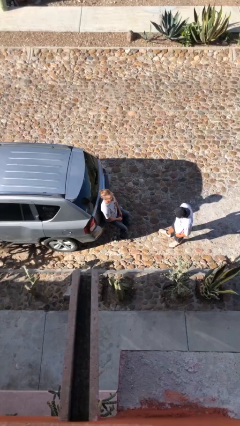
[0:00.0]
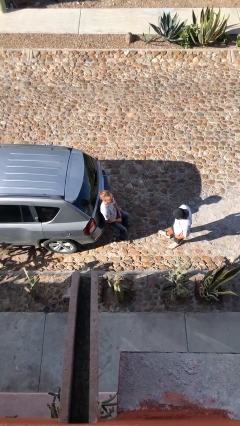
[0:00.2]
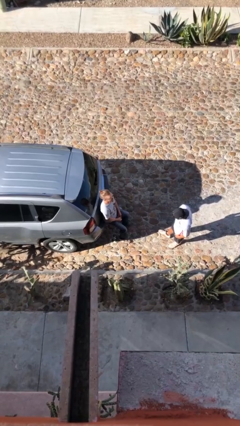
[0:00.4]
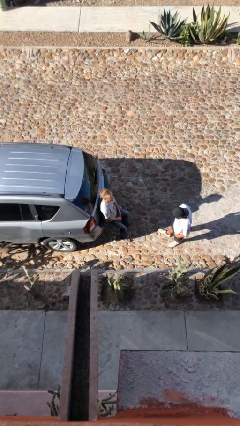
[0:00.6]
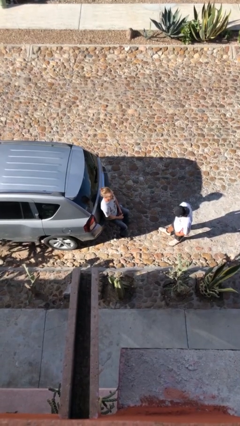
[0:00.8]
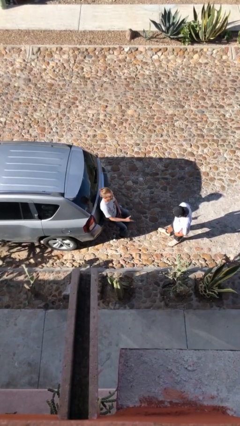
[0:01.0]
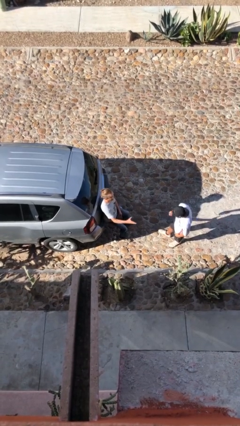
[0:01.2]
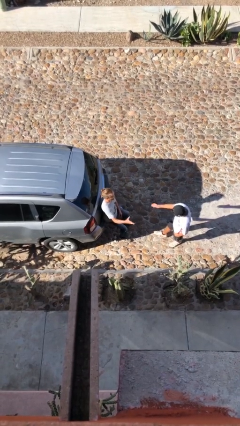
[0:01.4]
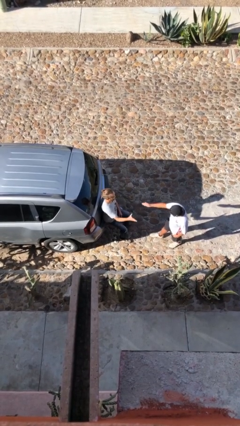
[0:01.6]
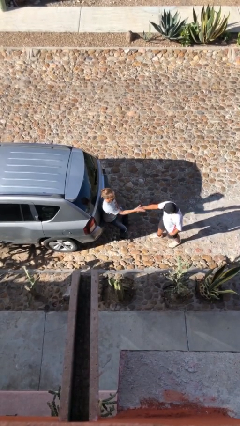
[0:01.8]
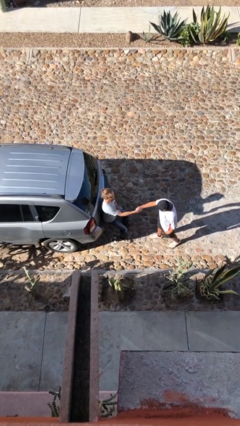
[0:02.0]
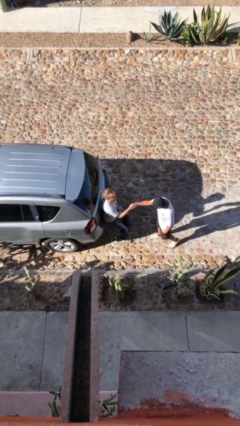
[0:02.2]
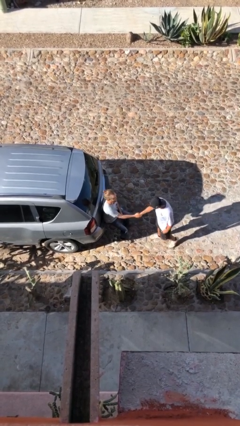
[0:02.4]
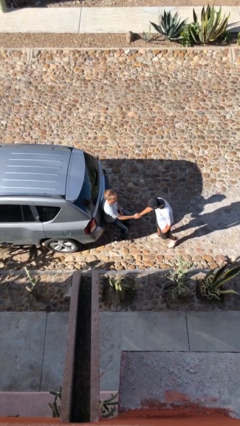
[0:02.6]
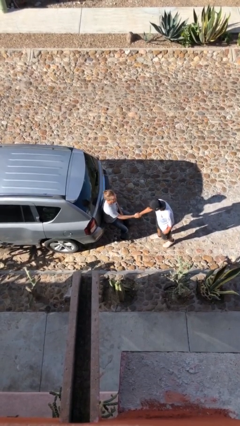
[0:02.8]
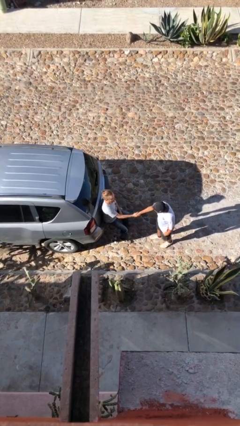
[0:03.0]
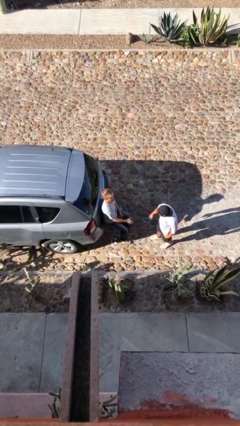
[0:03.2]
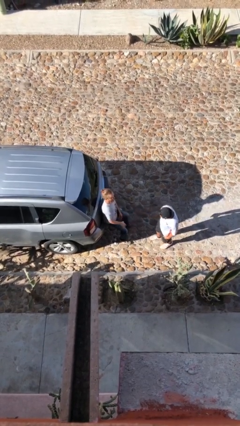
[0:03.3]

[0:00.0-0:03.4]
person shakes hand

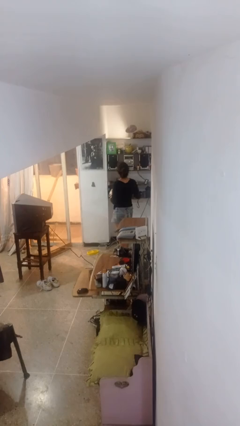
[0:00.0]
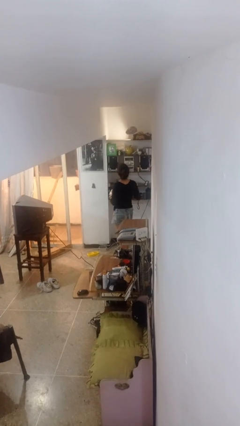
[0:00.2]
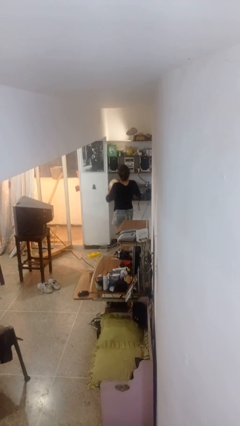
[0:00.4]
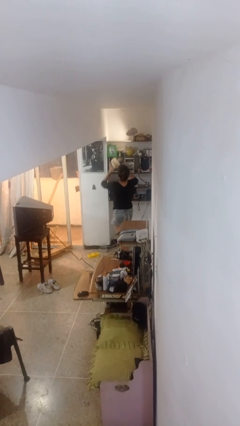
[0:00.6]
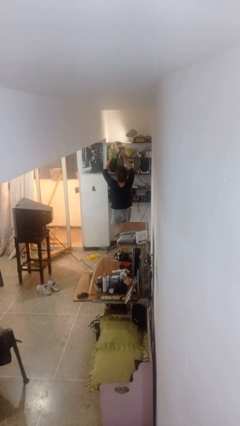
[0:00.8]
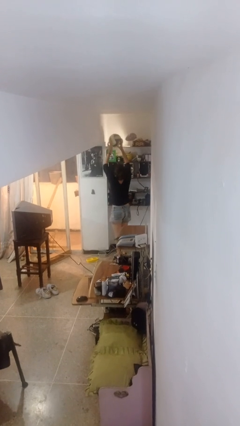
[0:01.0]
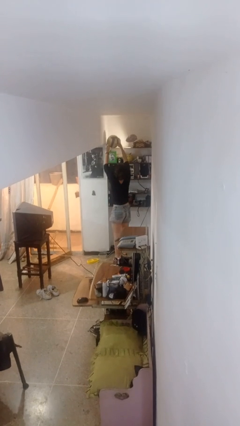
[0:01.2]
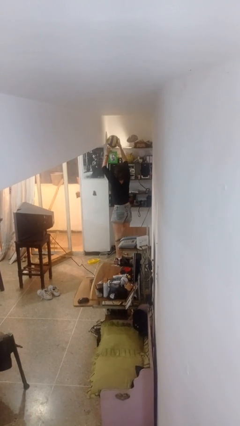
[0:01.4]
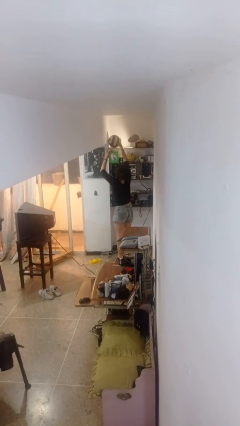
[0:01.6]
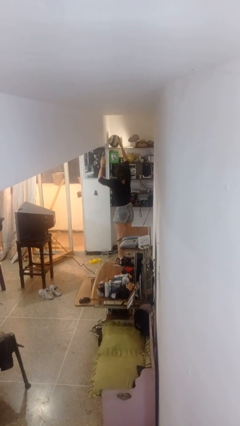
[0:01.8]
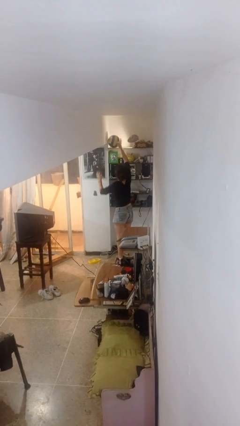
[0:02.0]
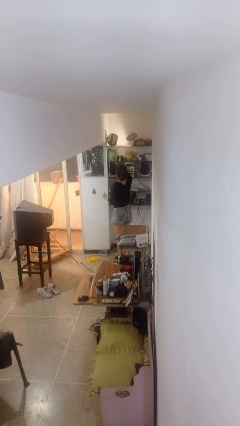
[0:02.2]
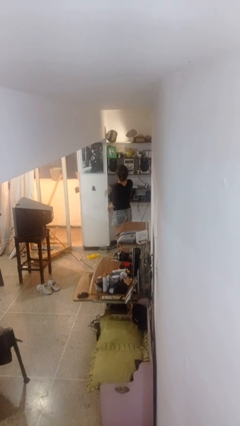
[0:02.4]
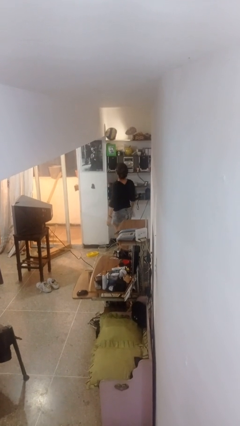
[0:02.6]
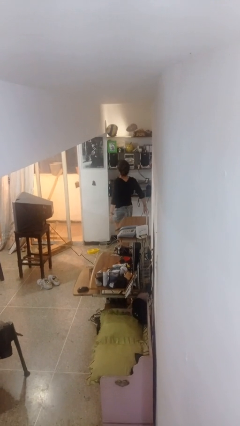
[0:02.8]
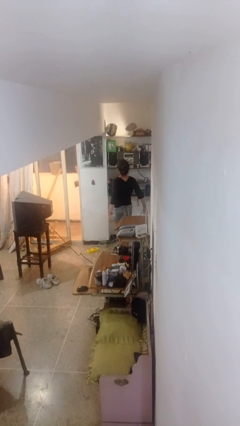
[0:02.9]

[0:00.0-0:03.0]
person puts down object on shelf

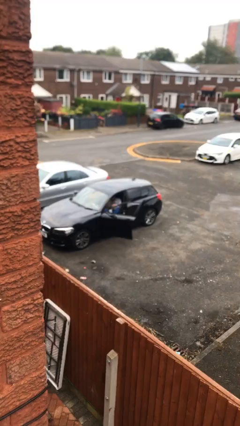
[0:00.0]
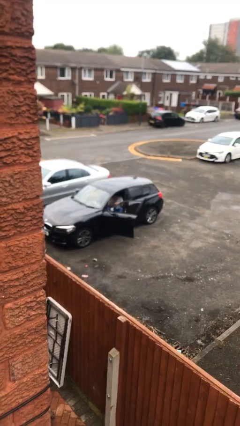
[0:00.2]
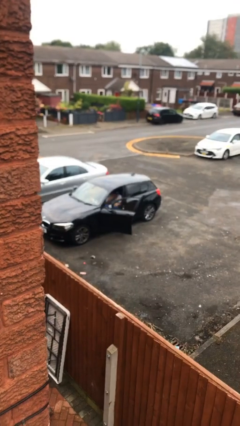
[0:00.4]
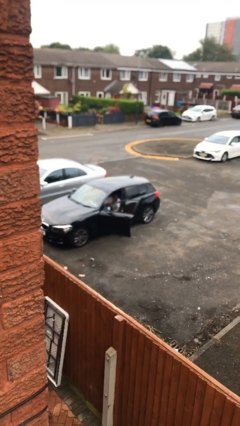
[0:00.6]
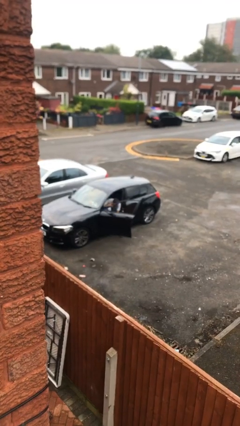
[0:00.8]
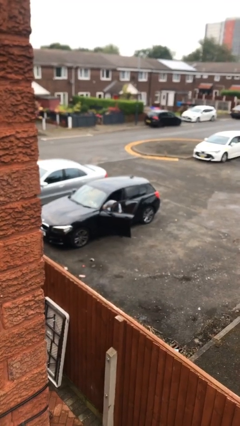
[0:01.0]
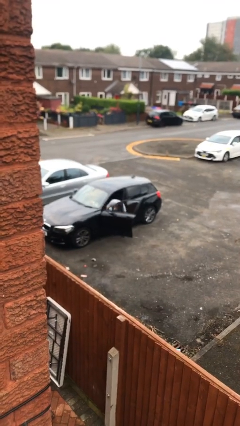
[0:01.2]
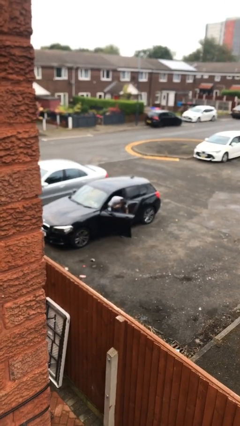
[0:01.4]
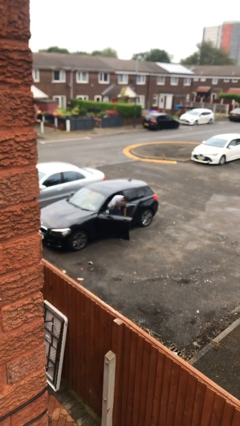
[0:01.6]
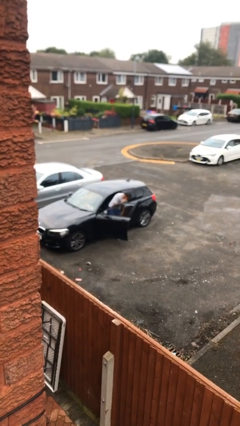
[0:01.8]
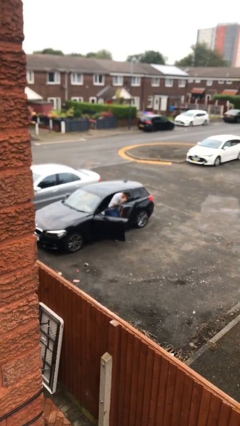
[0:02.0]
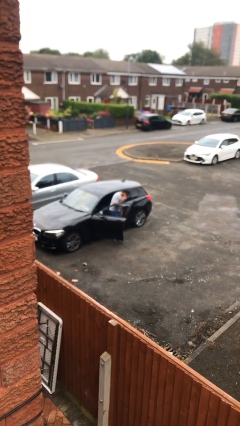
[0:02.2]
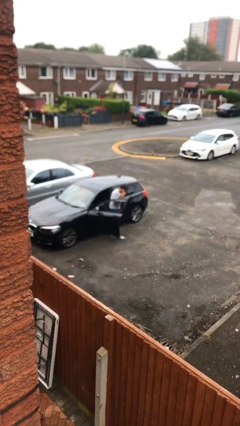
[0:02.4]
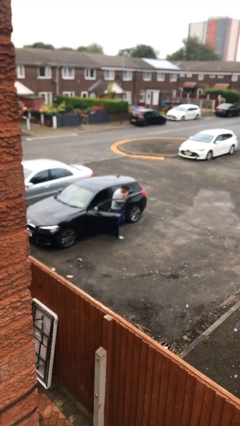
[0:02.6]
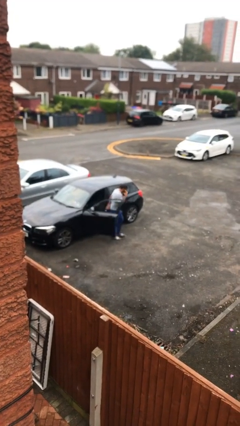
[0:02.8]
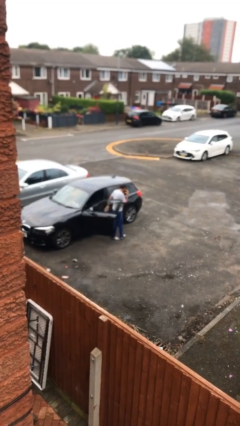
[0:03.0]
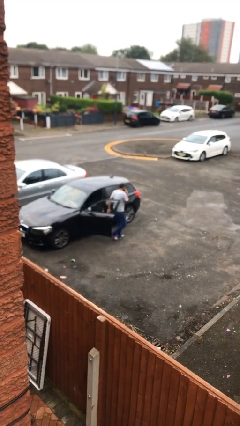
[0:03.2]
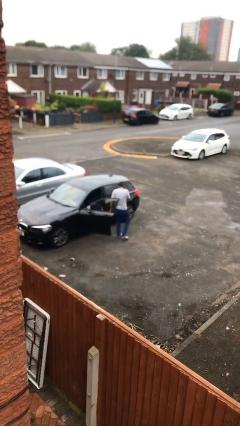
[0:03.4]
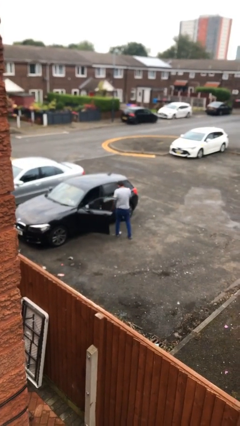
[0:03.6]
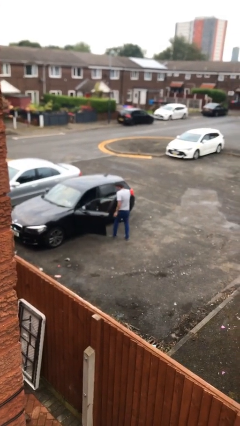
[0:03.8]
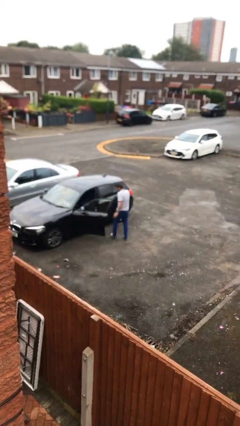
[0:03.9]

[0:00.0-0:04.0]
person exits car

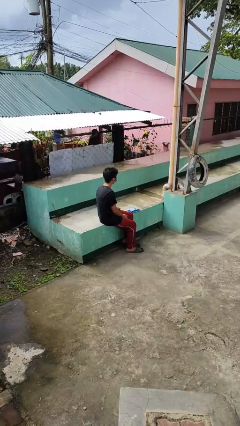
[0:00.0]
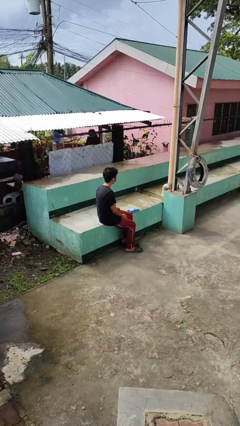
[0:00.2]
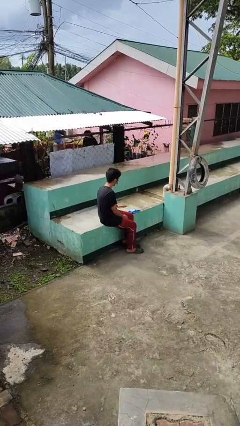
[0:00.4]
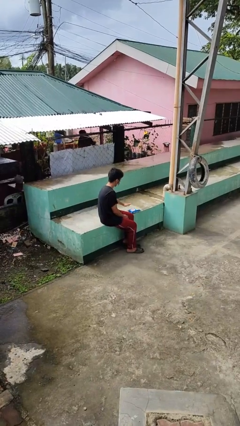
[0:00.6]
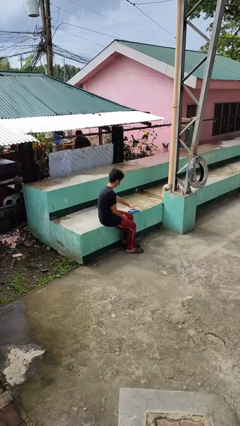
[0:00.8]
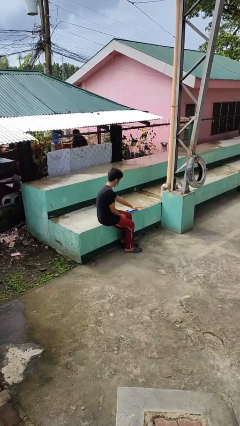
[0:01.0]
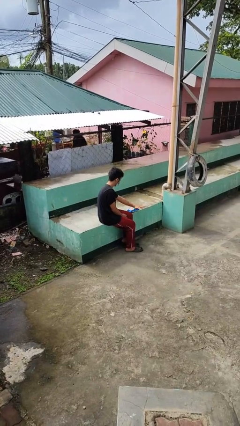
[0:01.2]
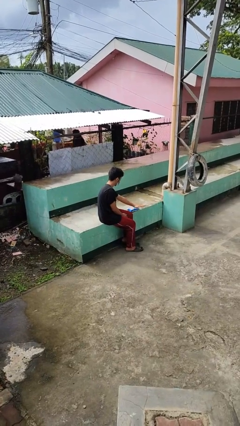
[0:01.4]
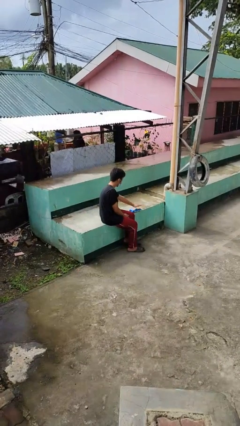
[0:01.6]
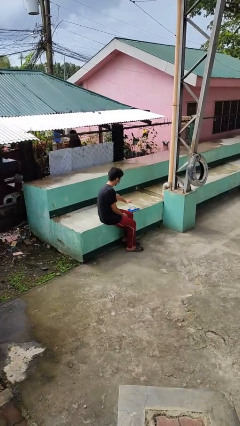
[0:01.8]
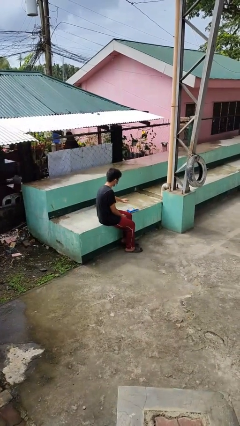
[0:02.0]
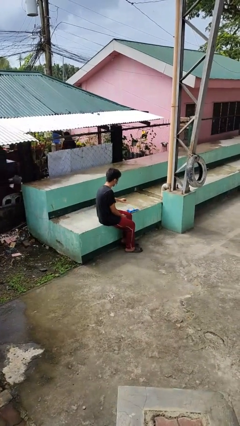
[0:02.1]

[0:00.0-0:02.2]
person waves hand over object

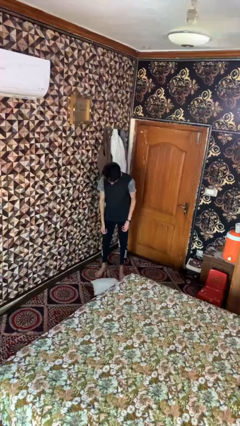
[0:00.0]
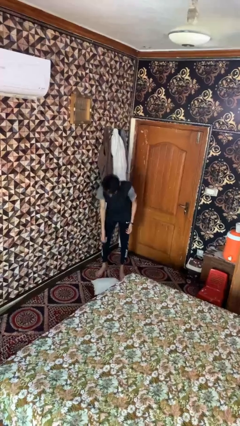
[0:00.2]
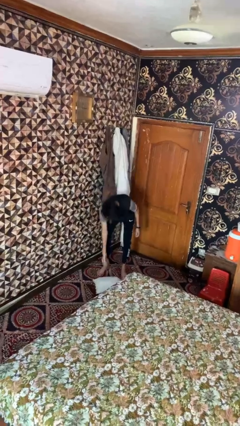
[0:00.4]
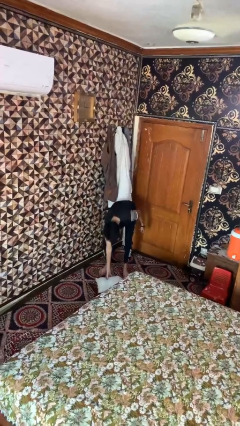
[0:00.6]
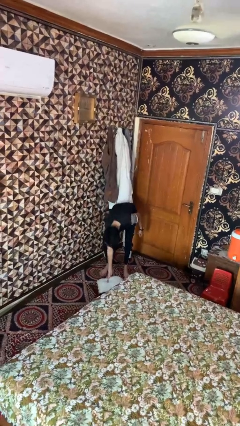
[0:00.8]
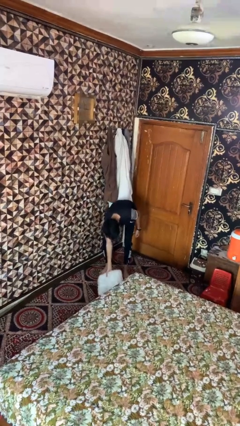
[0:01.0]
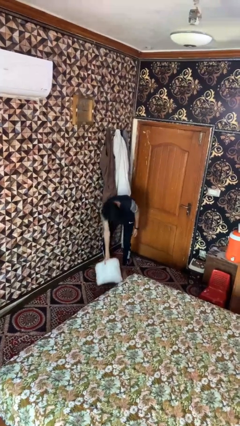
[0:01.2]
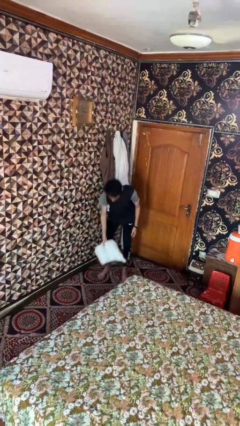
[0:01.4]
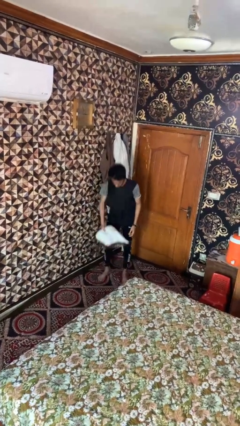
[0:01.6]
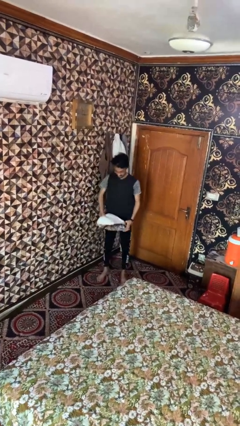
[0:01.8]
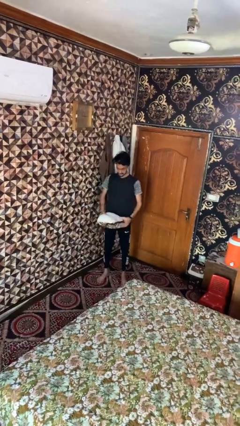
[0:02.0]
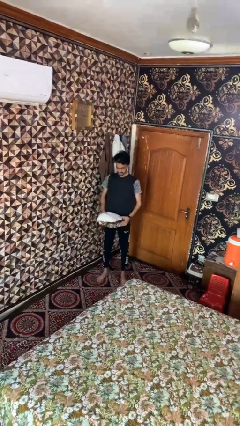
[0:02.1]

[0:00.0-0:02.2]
person picks up object from floor

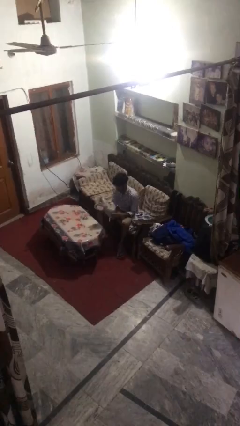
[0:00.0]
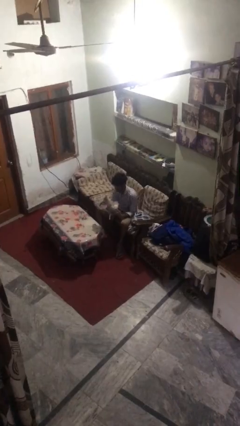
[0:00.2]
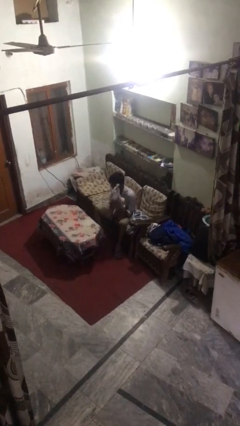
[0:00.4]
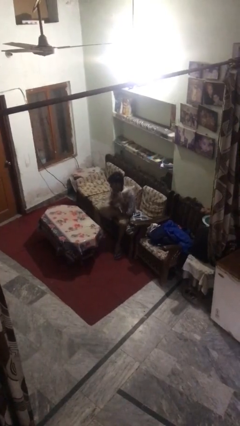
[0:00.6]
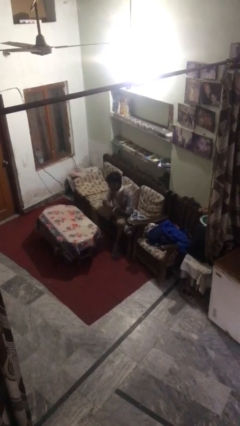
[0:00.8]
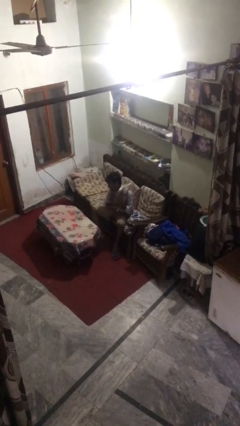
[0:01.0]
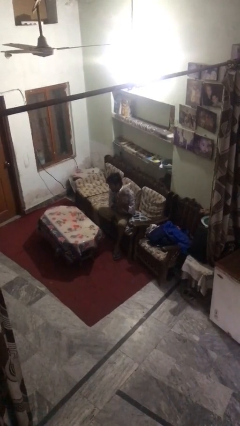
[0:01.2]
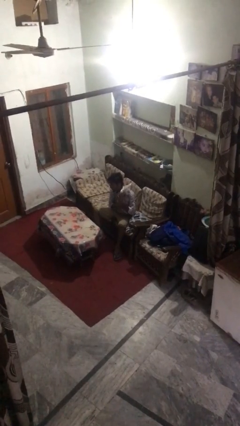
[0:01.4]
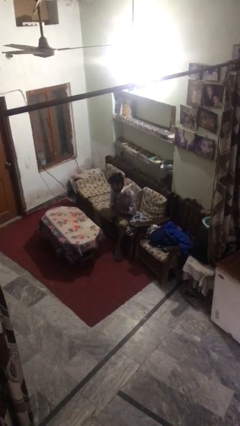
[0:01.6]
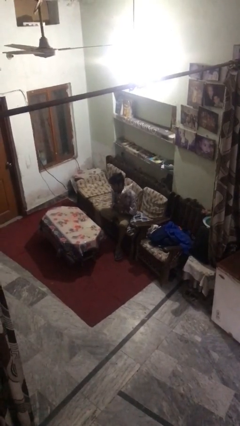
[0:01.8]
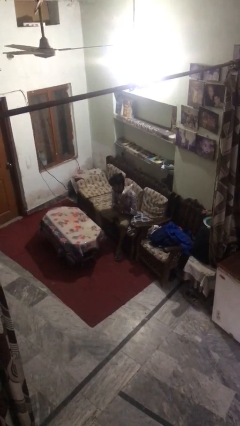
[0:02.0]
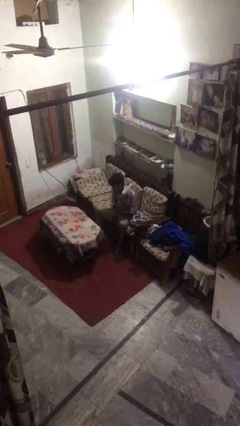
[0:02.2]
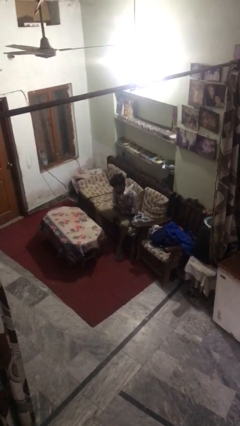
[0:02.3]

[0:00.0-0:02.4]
person hugs stuffed animal
